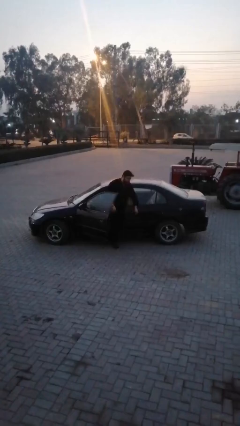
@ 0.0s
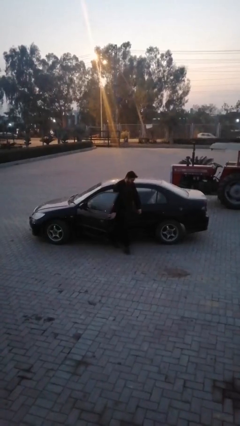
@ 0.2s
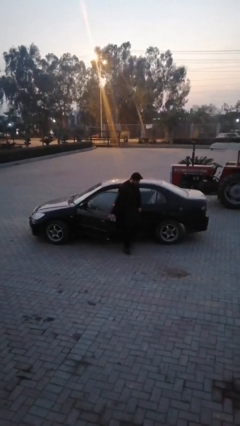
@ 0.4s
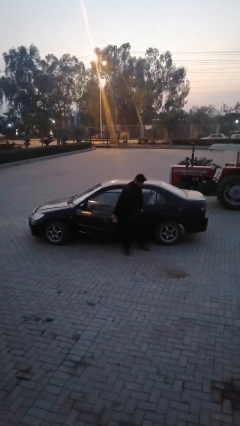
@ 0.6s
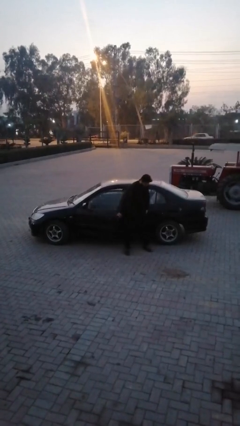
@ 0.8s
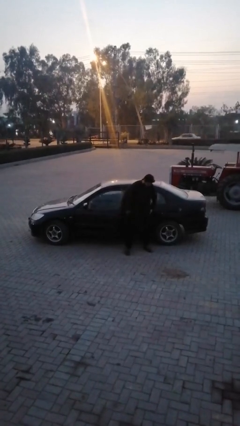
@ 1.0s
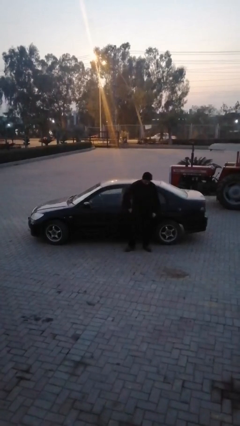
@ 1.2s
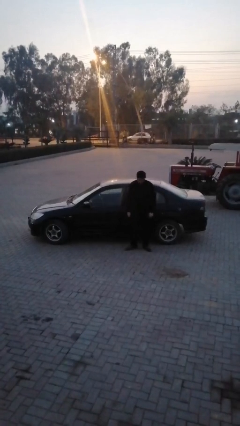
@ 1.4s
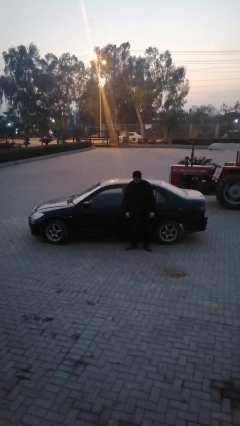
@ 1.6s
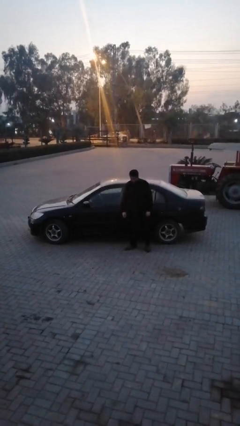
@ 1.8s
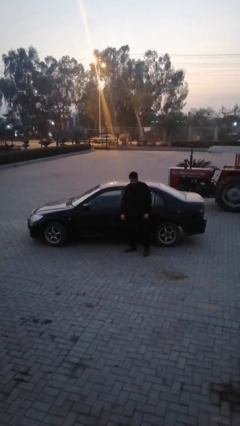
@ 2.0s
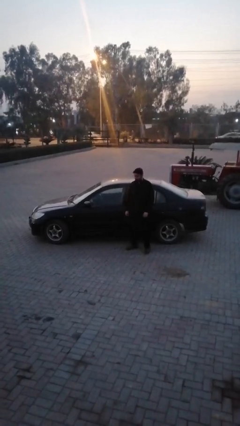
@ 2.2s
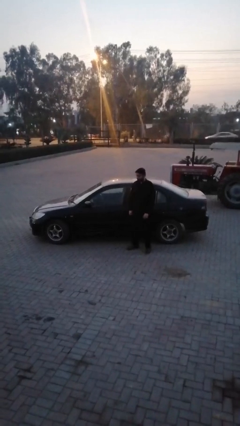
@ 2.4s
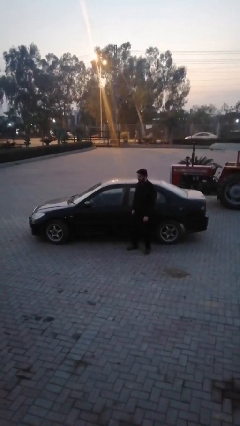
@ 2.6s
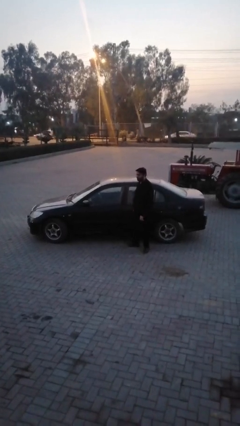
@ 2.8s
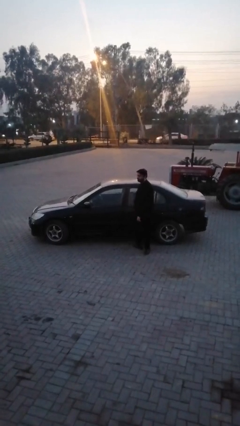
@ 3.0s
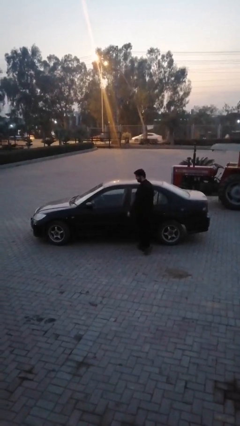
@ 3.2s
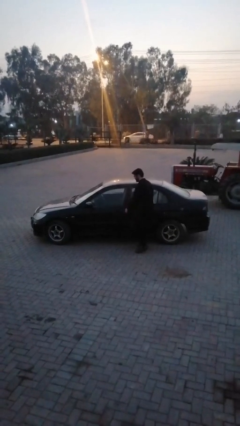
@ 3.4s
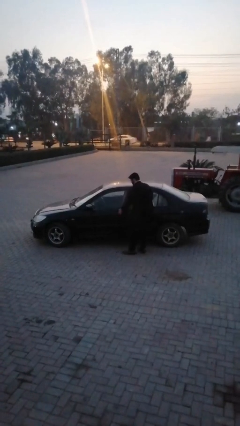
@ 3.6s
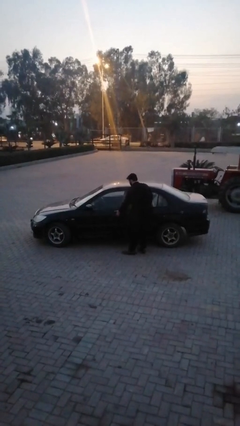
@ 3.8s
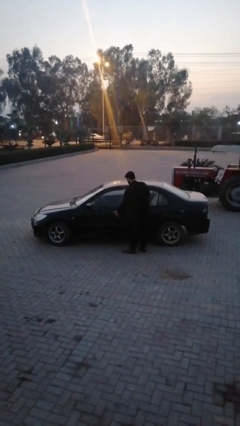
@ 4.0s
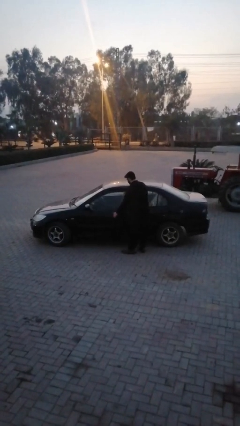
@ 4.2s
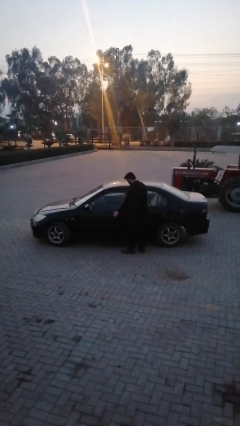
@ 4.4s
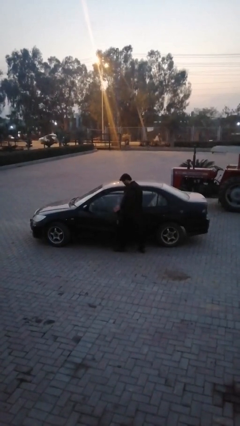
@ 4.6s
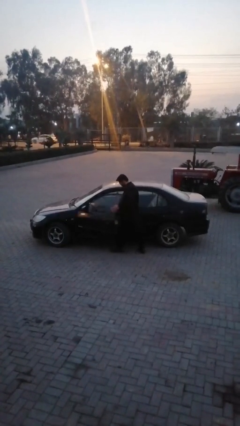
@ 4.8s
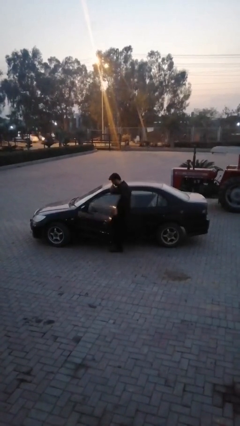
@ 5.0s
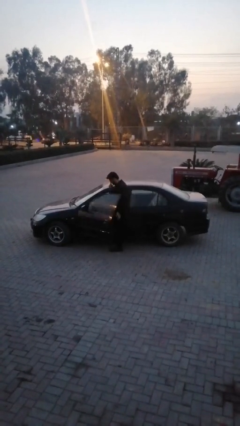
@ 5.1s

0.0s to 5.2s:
car drops off person

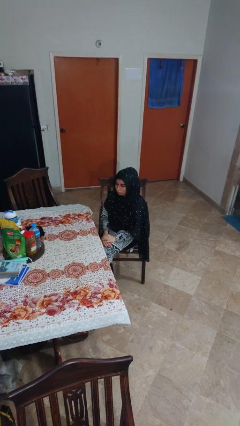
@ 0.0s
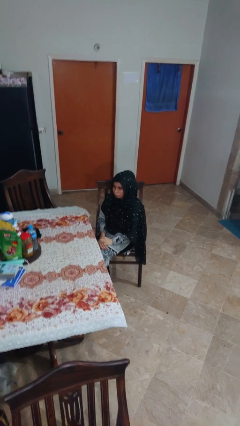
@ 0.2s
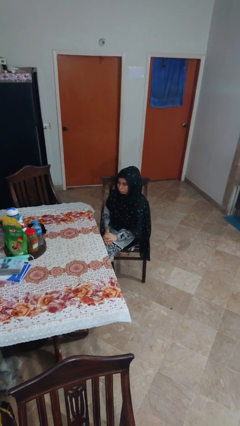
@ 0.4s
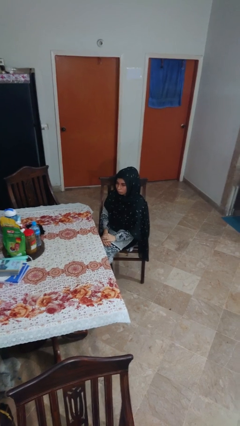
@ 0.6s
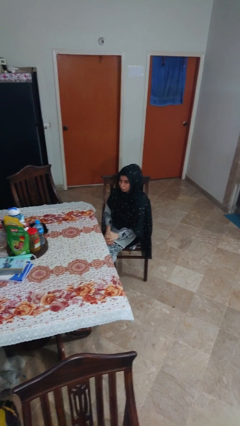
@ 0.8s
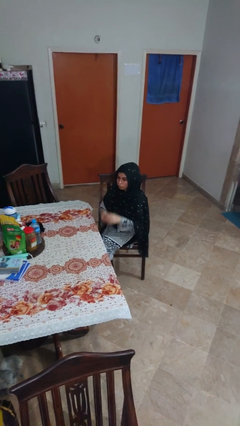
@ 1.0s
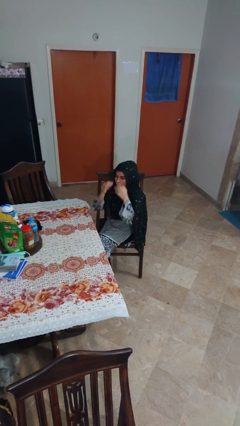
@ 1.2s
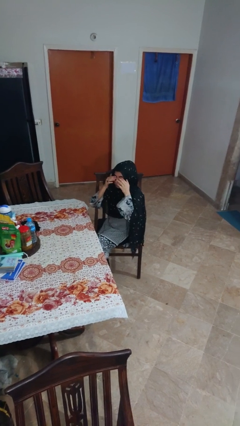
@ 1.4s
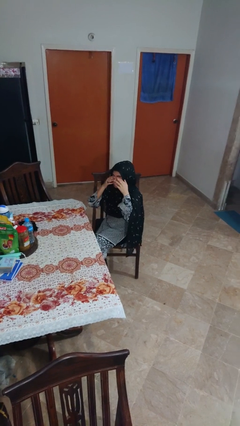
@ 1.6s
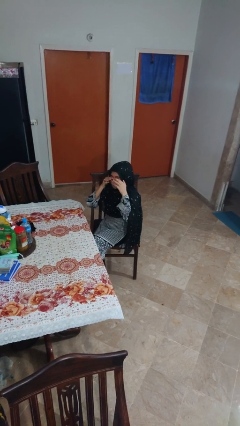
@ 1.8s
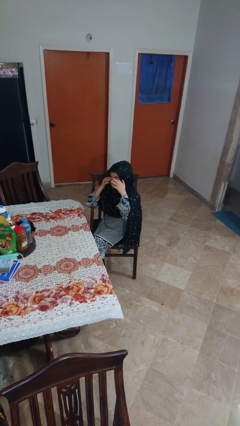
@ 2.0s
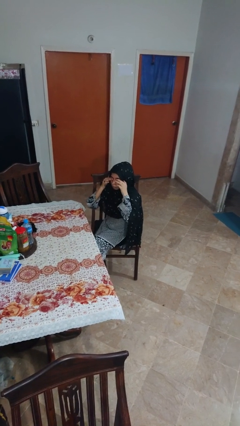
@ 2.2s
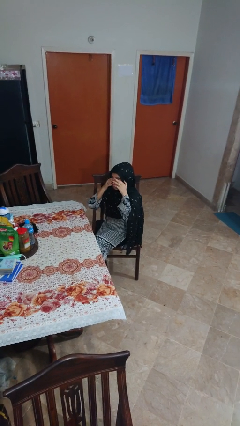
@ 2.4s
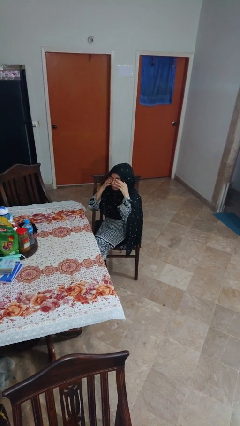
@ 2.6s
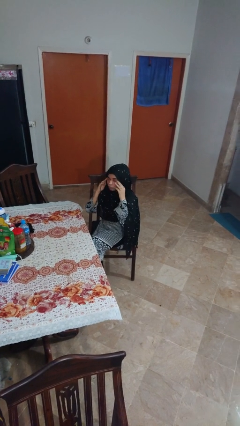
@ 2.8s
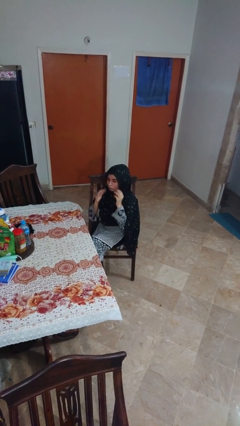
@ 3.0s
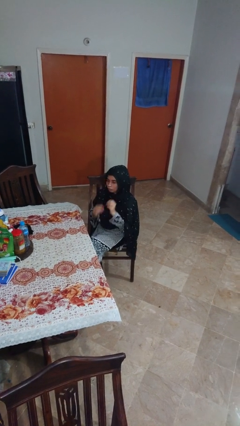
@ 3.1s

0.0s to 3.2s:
person rubs eyes

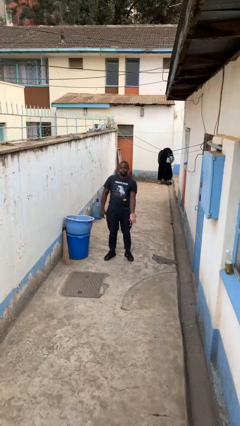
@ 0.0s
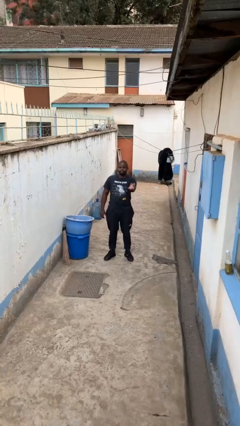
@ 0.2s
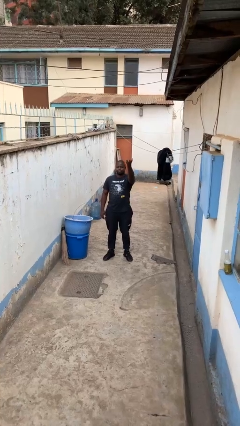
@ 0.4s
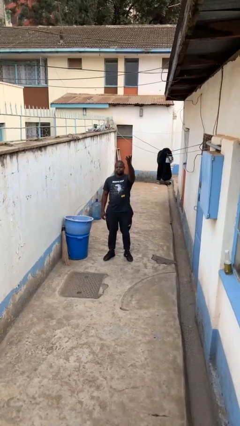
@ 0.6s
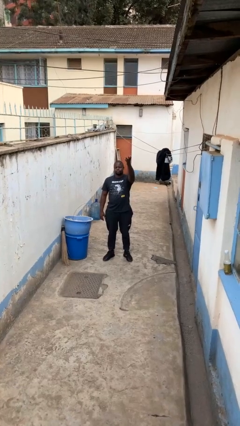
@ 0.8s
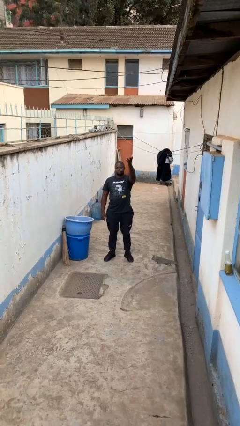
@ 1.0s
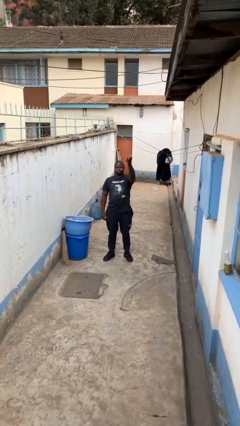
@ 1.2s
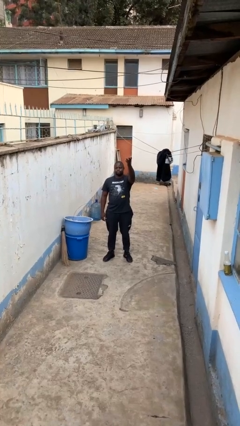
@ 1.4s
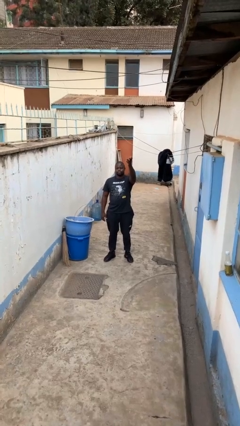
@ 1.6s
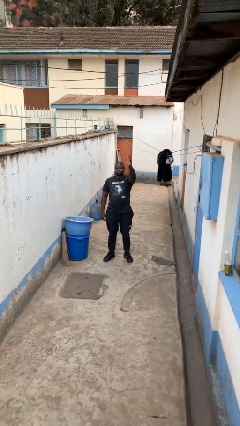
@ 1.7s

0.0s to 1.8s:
person gestures swipe up

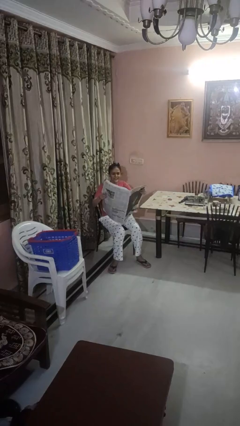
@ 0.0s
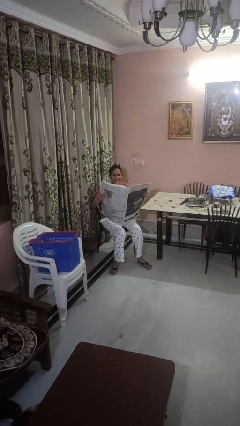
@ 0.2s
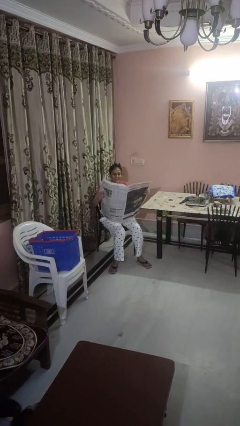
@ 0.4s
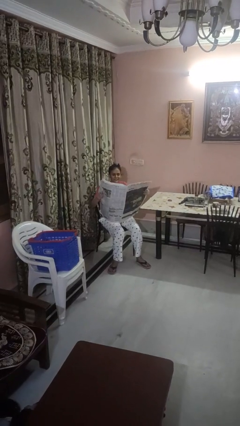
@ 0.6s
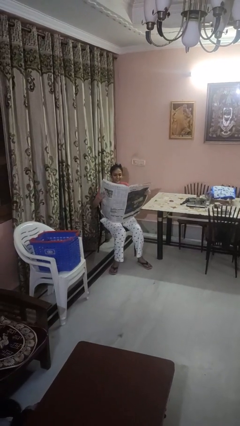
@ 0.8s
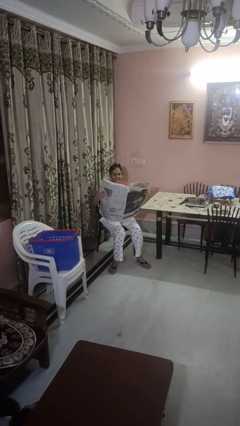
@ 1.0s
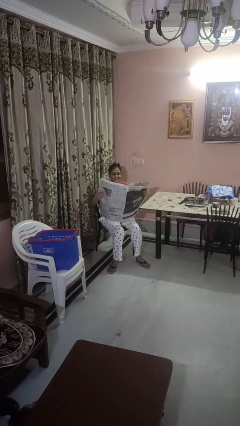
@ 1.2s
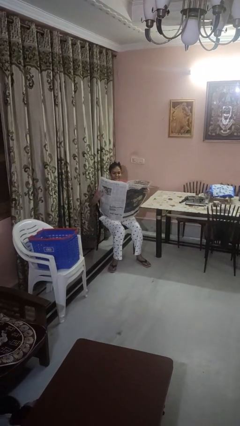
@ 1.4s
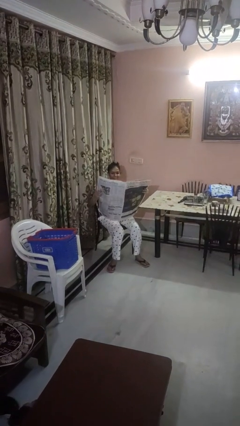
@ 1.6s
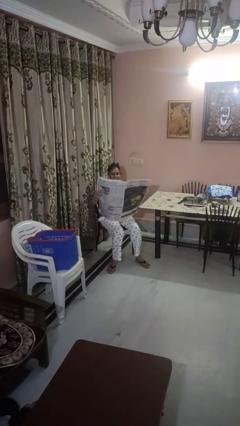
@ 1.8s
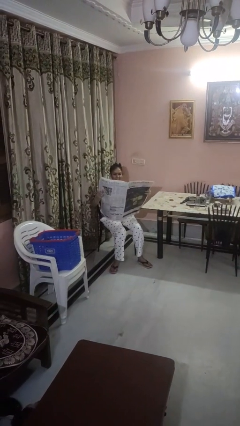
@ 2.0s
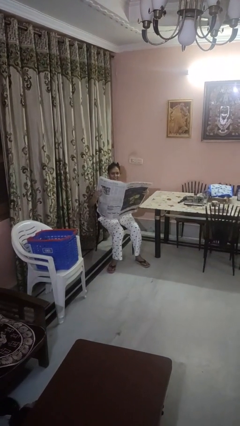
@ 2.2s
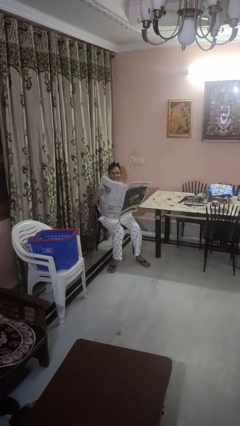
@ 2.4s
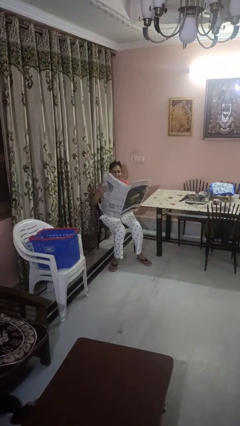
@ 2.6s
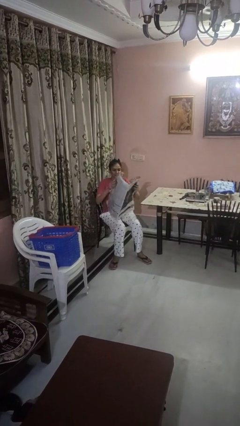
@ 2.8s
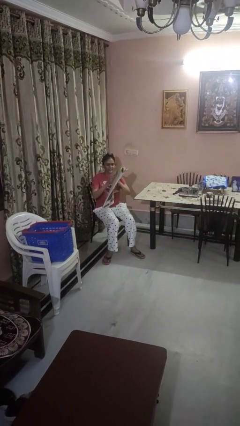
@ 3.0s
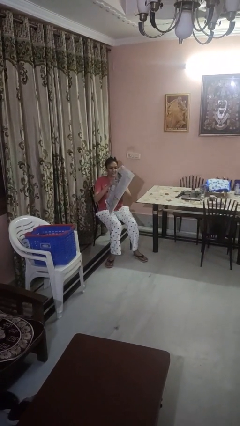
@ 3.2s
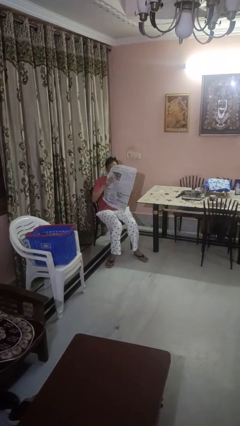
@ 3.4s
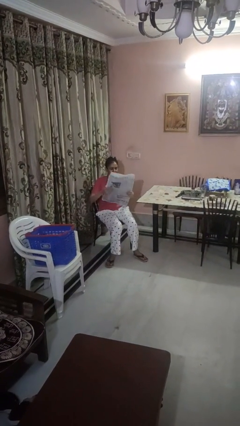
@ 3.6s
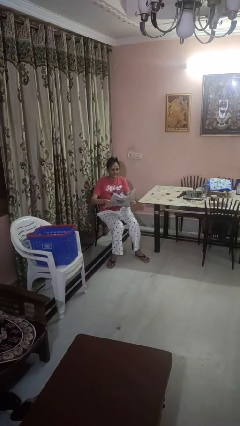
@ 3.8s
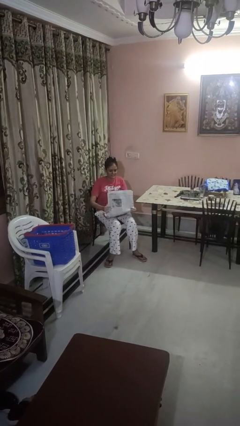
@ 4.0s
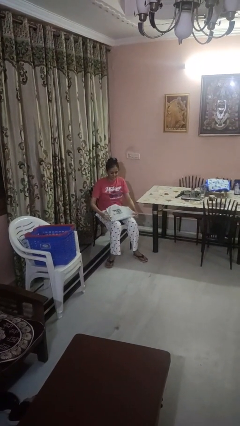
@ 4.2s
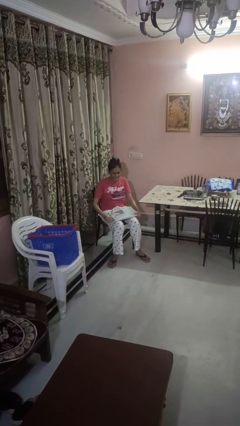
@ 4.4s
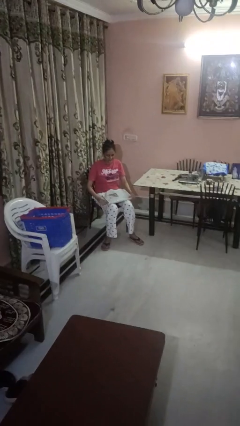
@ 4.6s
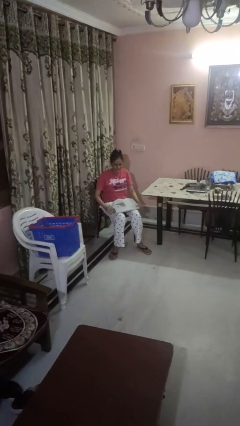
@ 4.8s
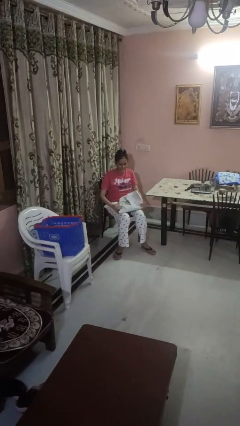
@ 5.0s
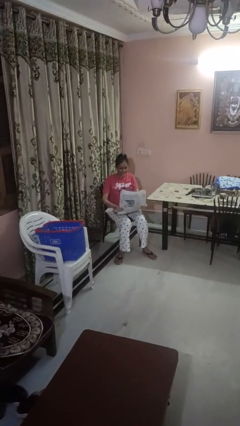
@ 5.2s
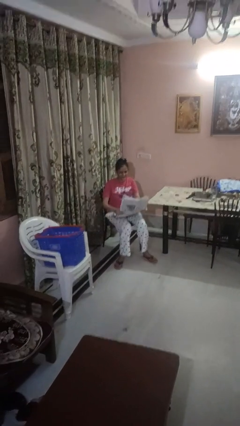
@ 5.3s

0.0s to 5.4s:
person reads newspaper

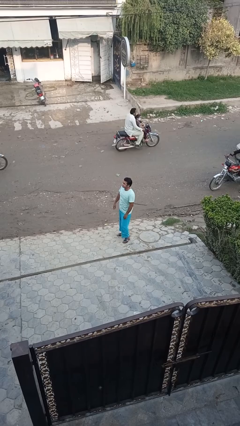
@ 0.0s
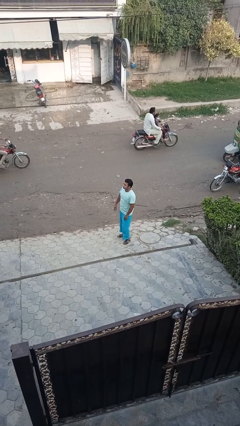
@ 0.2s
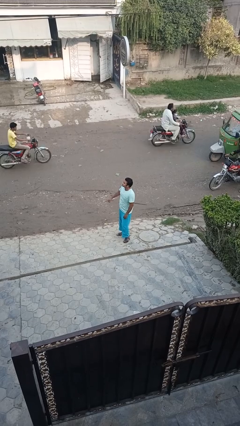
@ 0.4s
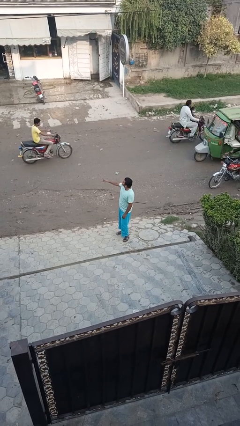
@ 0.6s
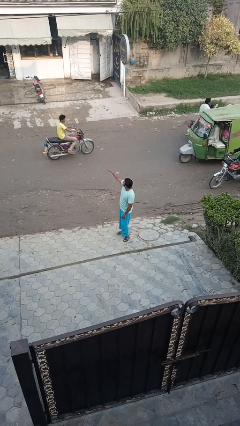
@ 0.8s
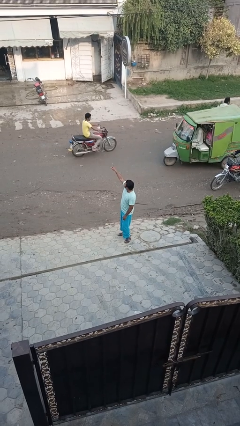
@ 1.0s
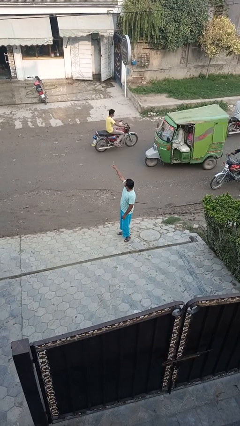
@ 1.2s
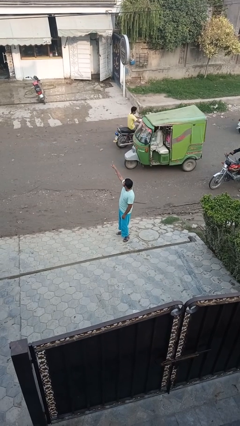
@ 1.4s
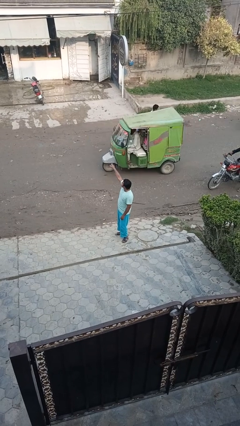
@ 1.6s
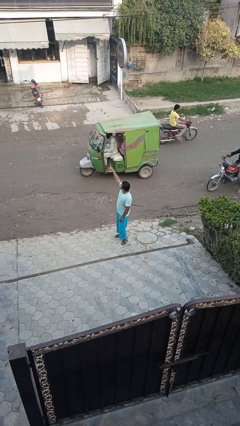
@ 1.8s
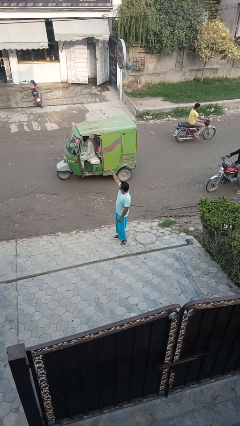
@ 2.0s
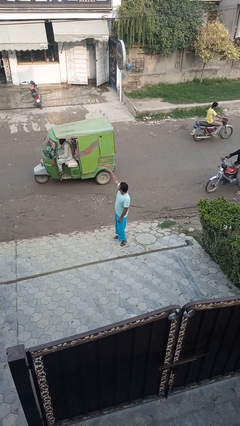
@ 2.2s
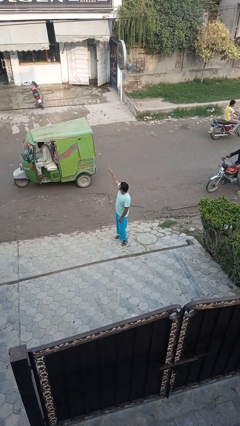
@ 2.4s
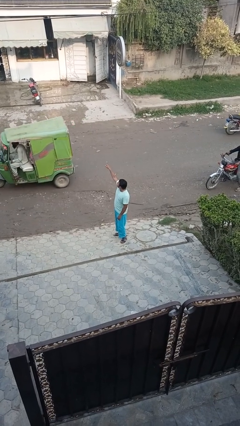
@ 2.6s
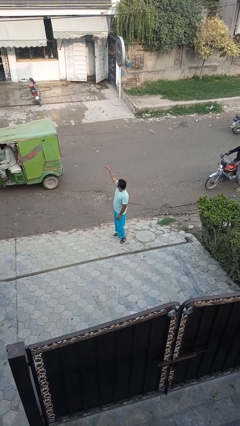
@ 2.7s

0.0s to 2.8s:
person points at person
